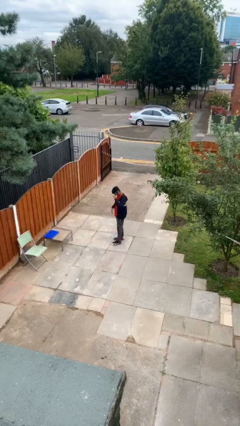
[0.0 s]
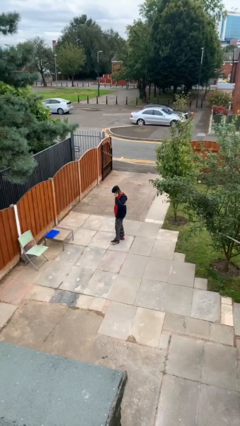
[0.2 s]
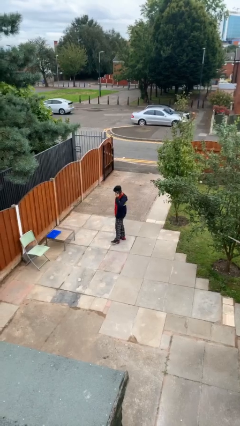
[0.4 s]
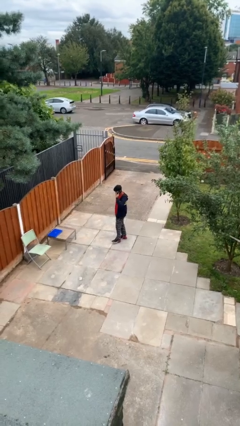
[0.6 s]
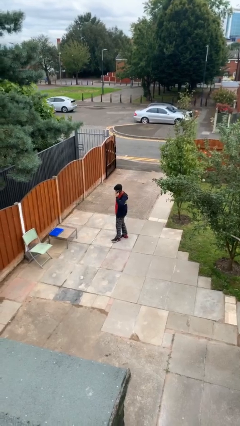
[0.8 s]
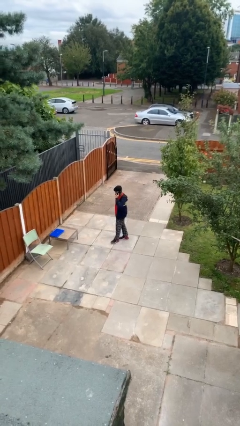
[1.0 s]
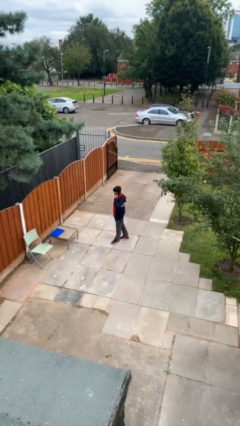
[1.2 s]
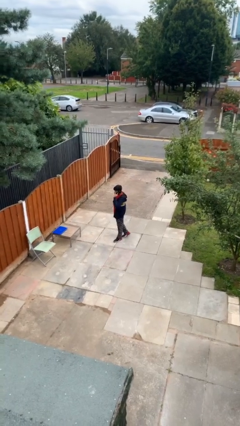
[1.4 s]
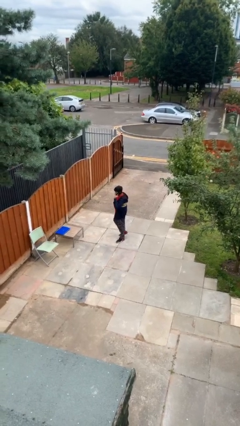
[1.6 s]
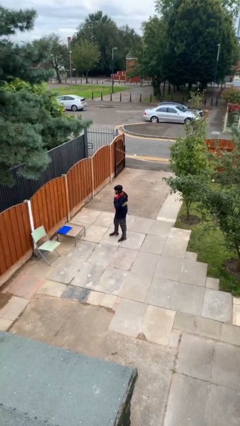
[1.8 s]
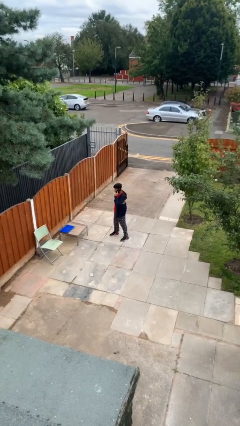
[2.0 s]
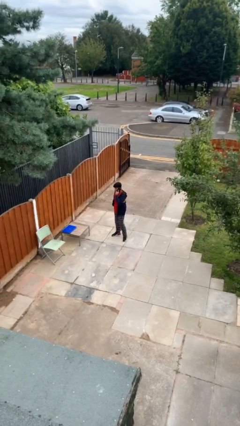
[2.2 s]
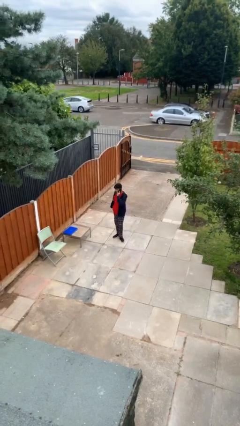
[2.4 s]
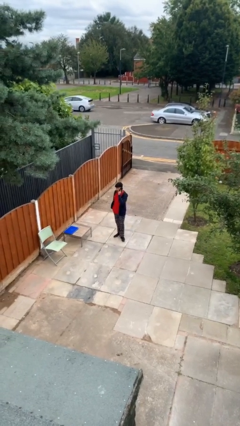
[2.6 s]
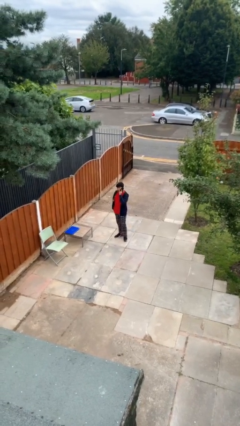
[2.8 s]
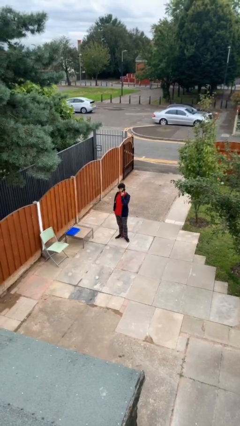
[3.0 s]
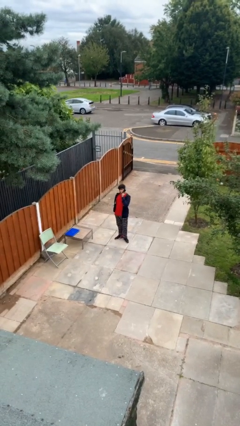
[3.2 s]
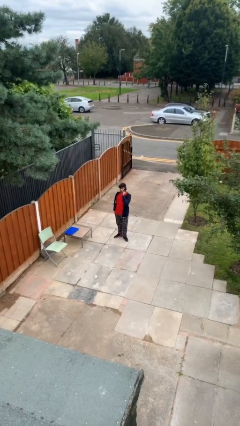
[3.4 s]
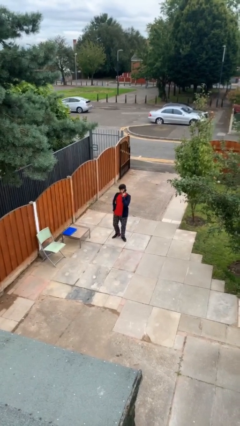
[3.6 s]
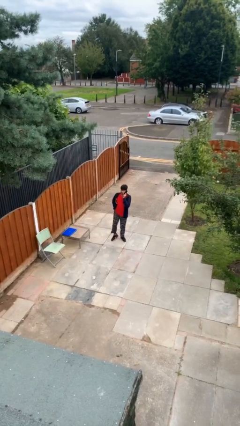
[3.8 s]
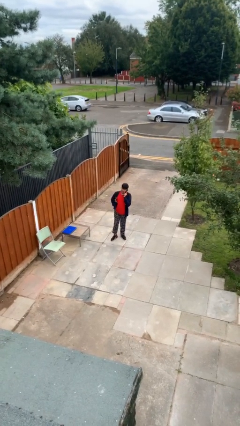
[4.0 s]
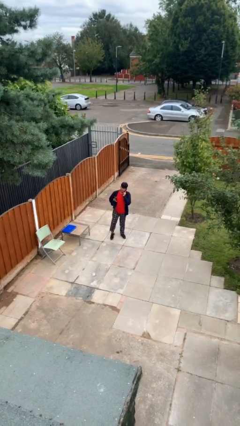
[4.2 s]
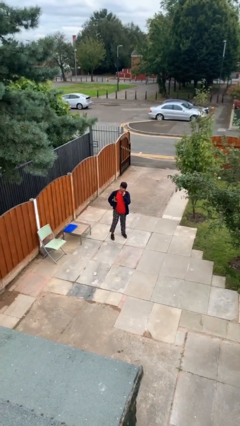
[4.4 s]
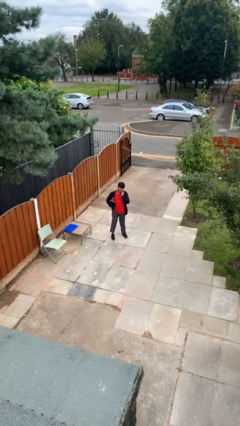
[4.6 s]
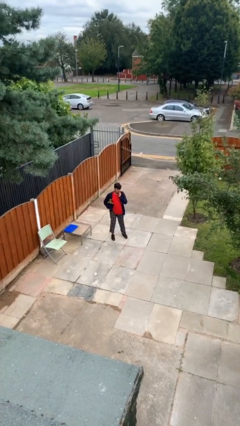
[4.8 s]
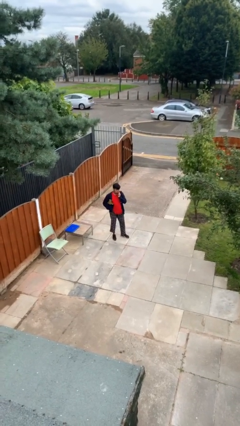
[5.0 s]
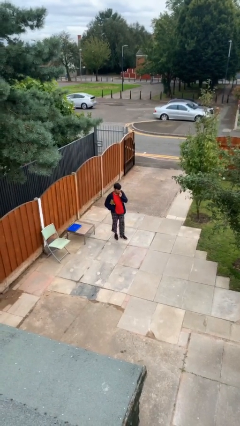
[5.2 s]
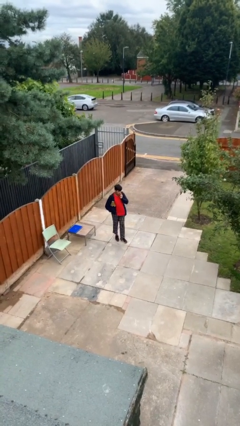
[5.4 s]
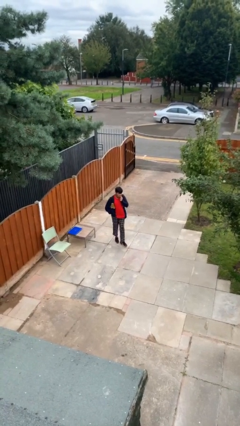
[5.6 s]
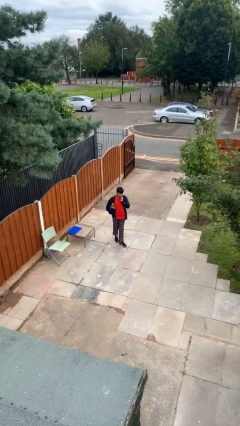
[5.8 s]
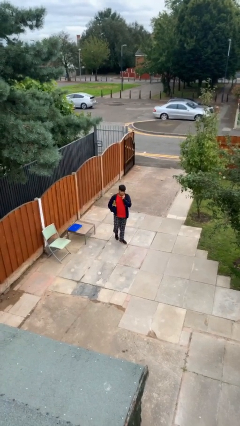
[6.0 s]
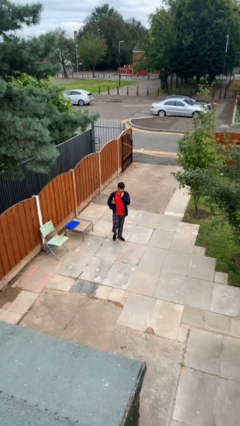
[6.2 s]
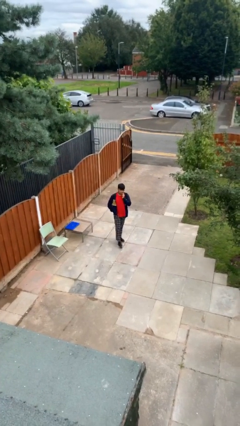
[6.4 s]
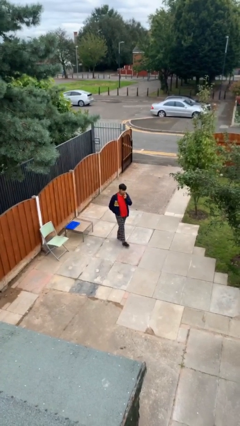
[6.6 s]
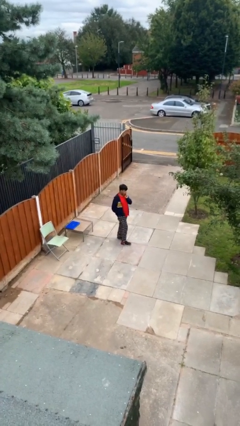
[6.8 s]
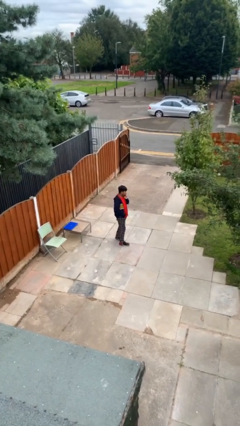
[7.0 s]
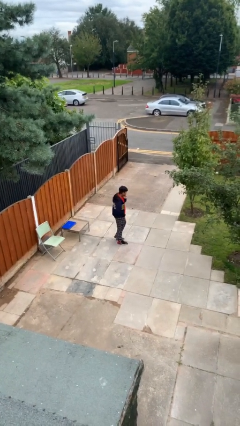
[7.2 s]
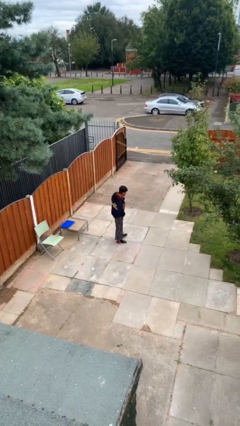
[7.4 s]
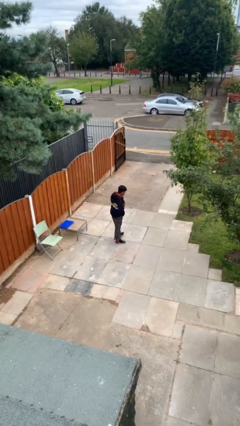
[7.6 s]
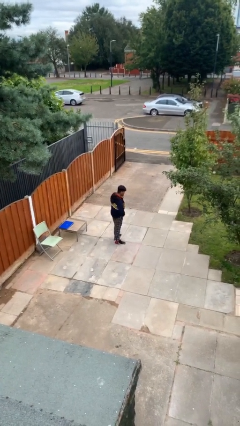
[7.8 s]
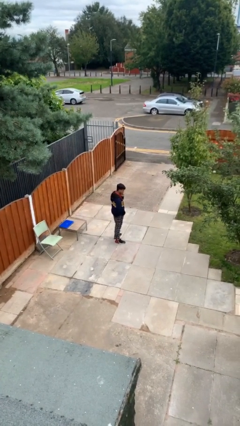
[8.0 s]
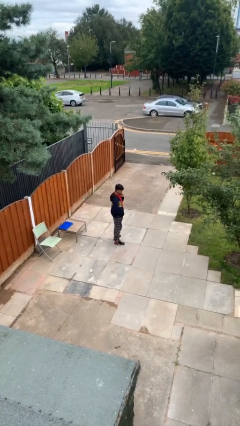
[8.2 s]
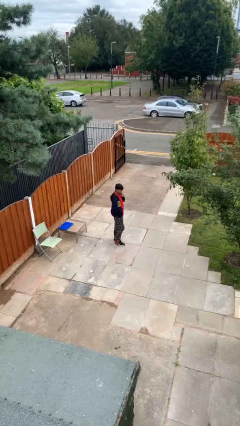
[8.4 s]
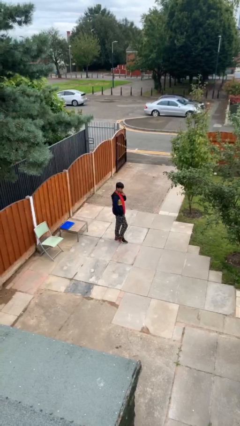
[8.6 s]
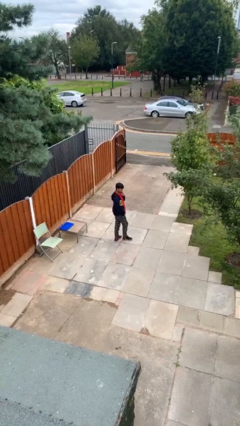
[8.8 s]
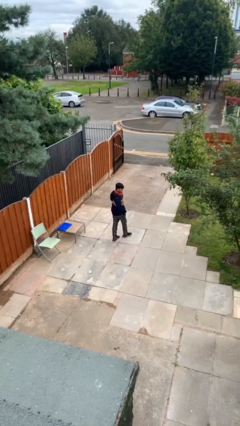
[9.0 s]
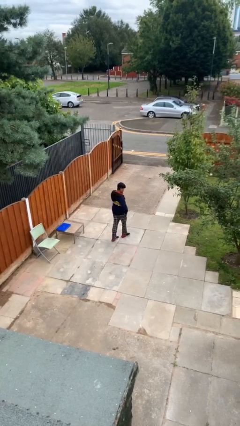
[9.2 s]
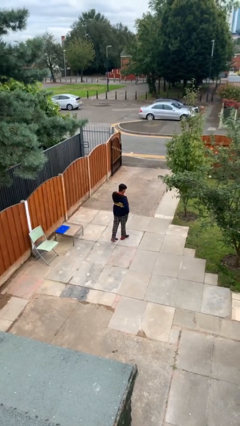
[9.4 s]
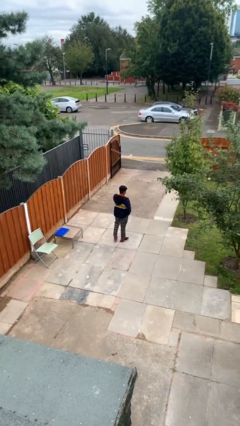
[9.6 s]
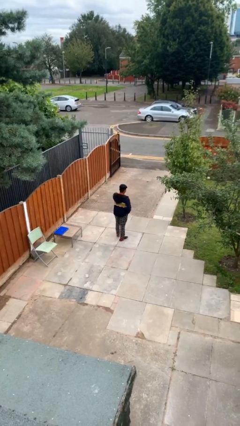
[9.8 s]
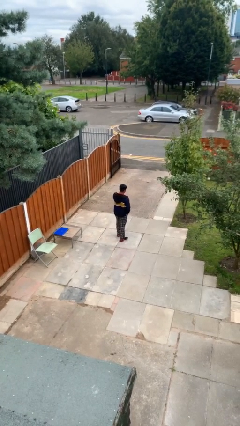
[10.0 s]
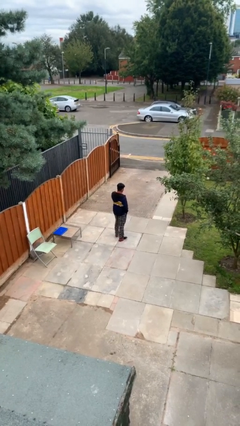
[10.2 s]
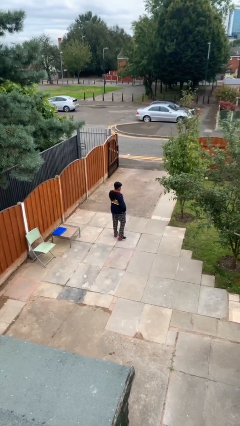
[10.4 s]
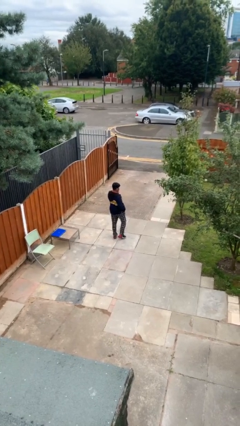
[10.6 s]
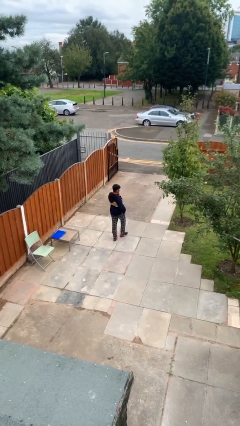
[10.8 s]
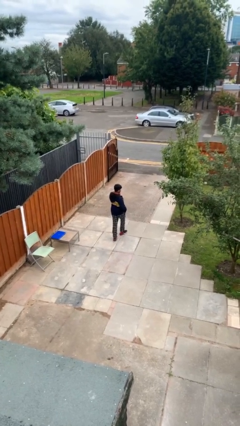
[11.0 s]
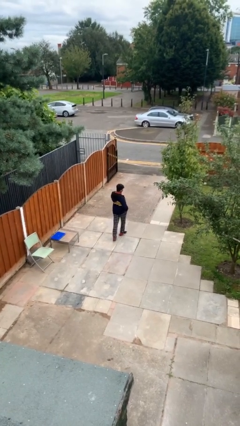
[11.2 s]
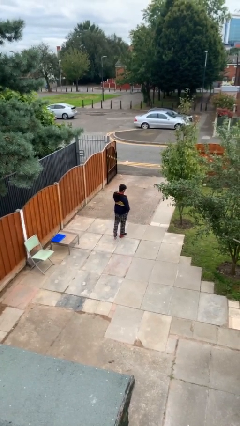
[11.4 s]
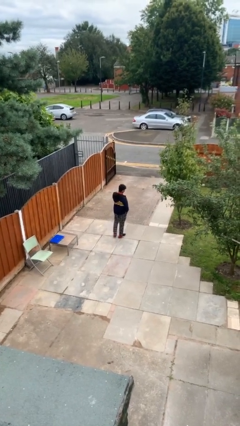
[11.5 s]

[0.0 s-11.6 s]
person talks on phone

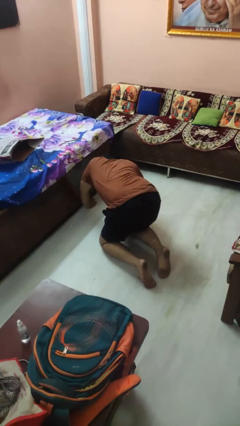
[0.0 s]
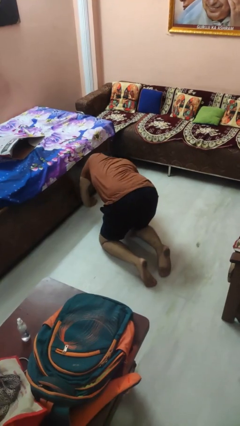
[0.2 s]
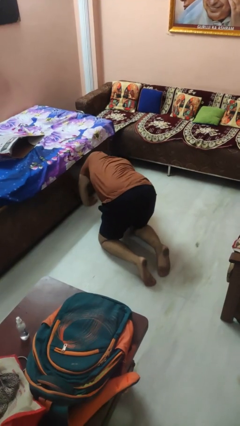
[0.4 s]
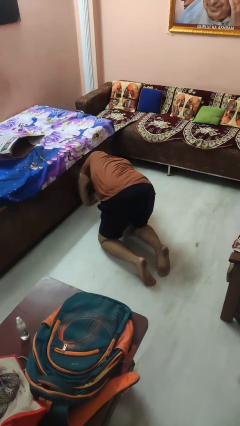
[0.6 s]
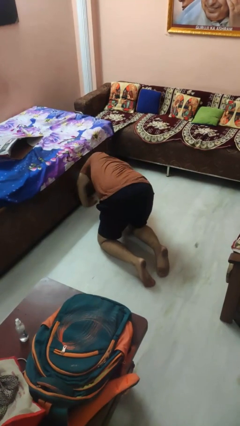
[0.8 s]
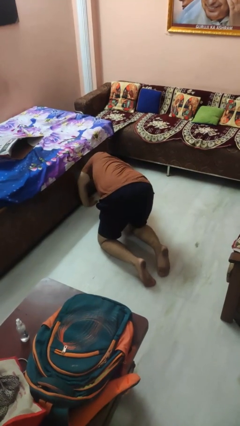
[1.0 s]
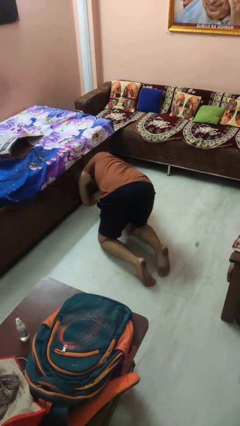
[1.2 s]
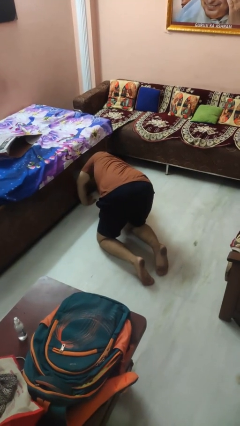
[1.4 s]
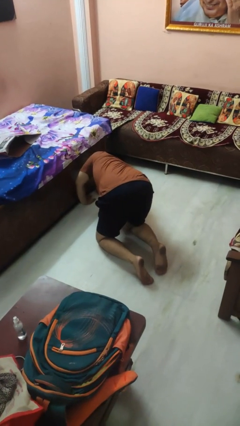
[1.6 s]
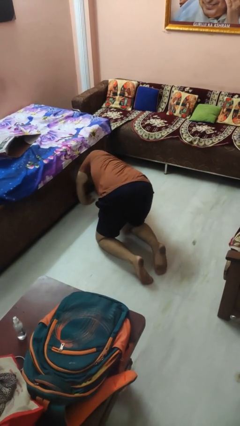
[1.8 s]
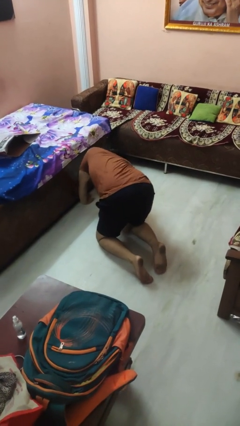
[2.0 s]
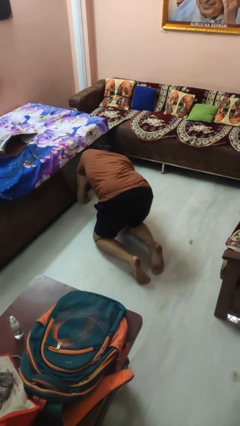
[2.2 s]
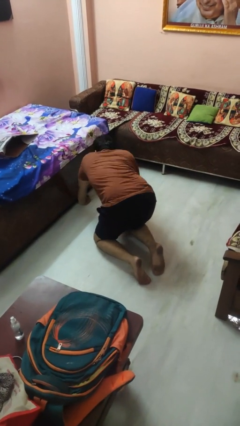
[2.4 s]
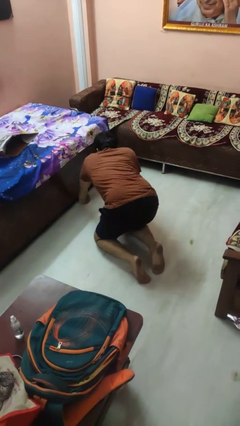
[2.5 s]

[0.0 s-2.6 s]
person searches under bed

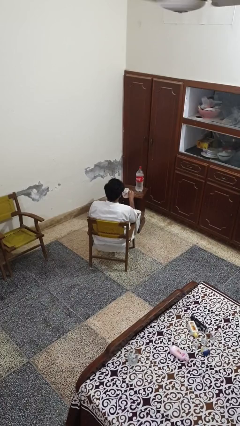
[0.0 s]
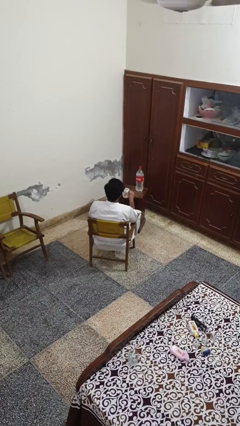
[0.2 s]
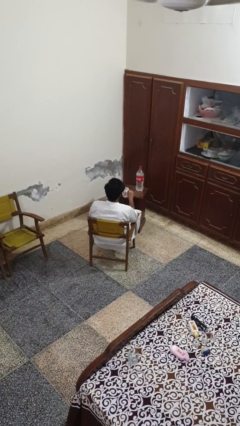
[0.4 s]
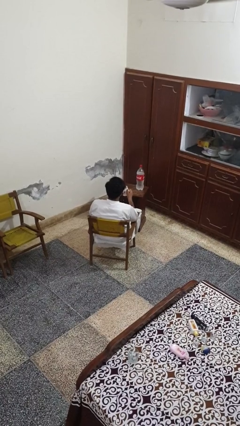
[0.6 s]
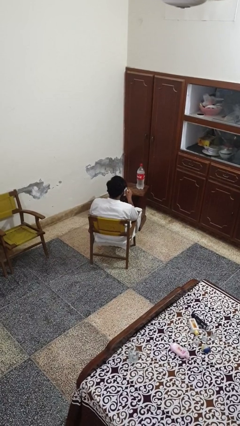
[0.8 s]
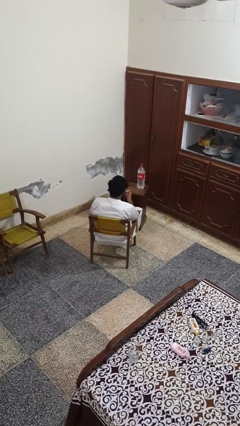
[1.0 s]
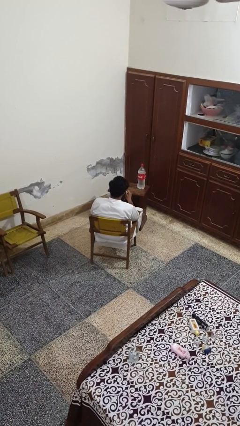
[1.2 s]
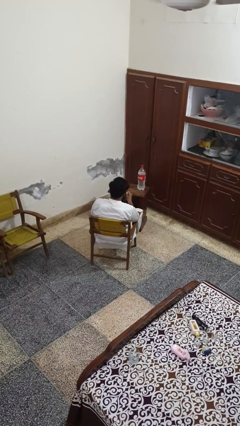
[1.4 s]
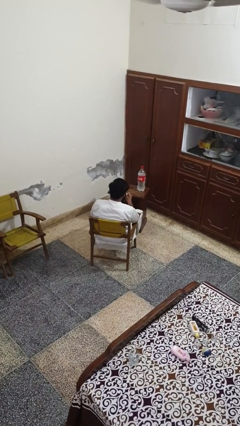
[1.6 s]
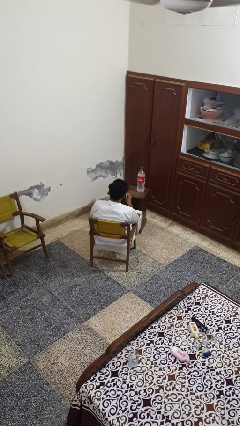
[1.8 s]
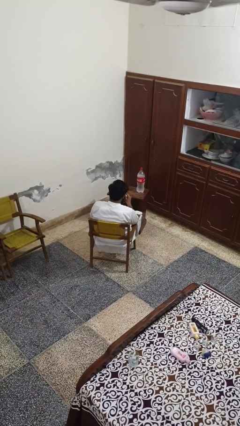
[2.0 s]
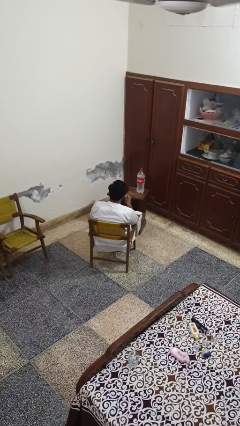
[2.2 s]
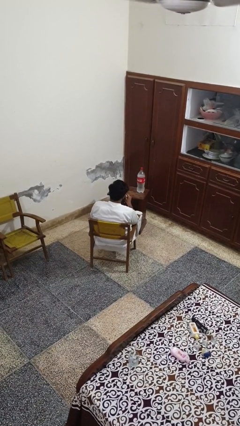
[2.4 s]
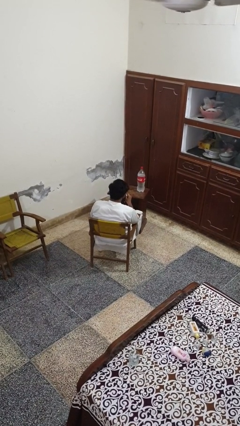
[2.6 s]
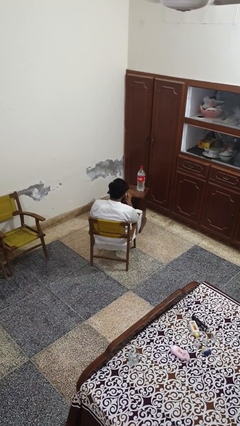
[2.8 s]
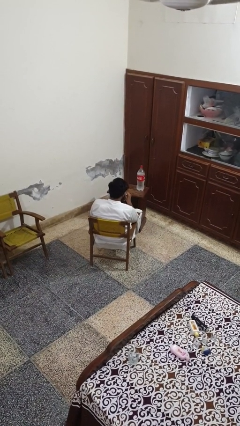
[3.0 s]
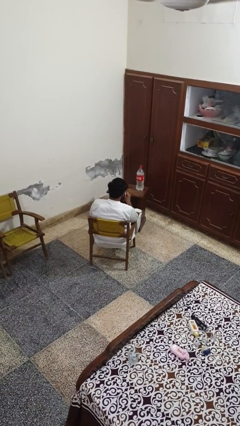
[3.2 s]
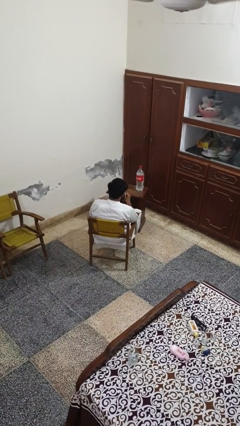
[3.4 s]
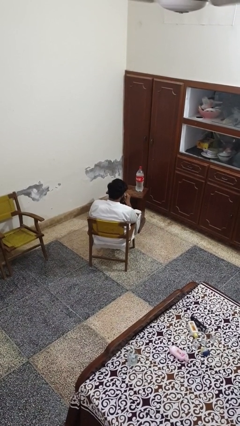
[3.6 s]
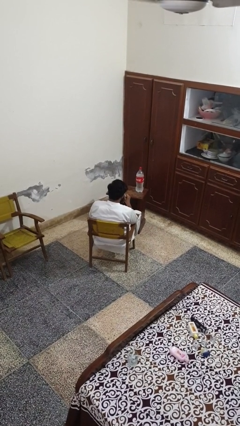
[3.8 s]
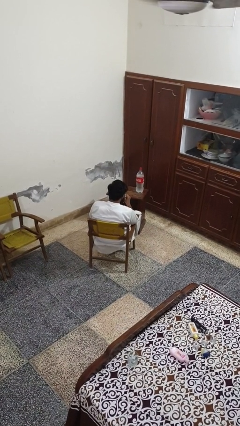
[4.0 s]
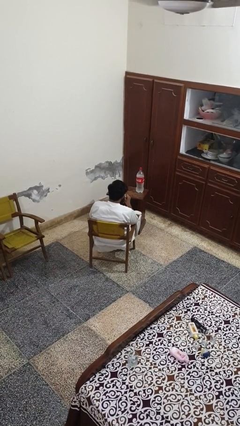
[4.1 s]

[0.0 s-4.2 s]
person drinks from mug
